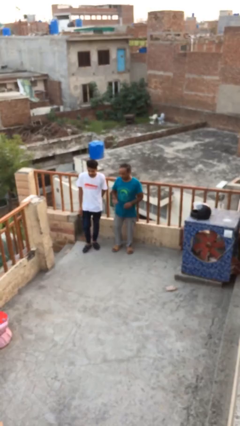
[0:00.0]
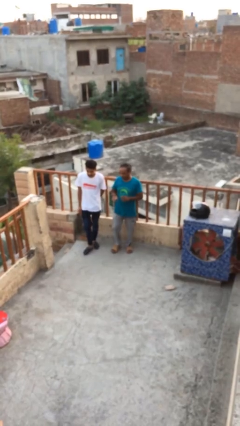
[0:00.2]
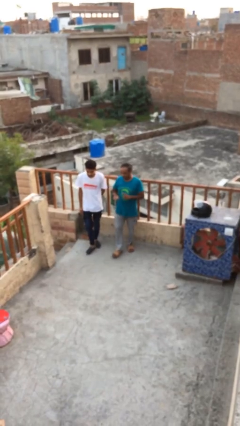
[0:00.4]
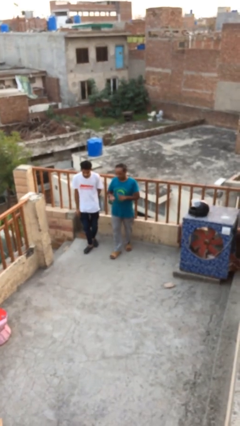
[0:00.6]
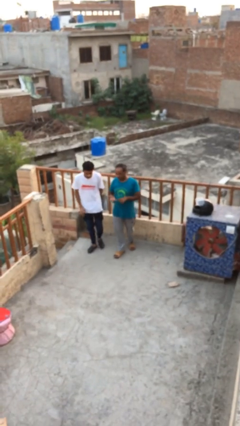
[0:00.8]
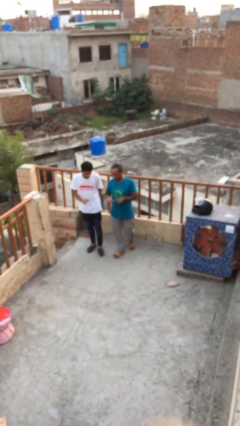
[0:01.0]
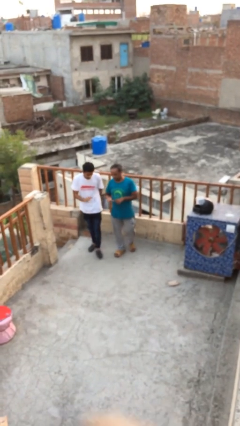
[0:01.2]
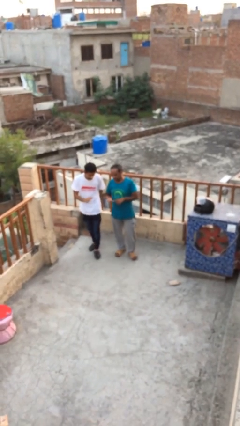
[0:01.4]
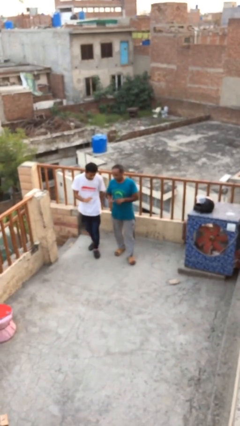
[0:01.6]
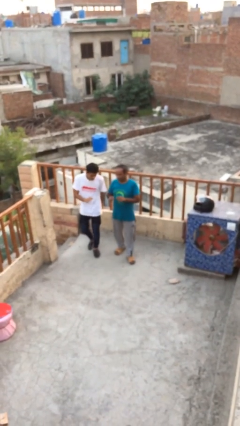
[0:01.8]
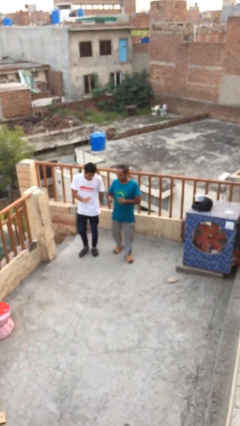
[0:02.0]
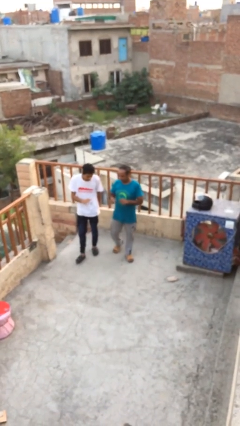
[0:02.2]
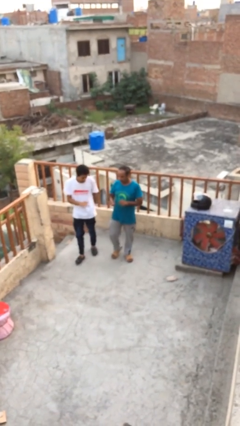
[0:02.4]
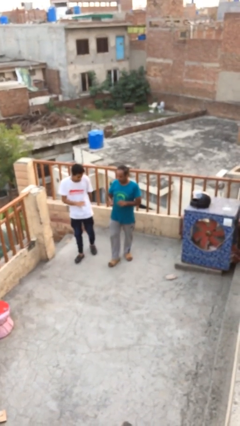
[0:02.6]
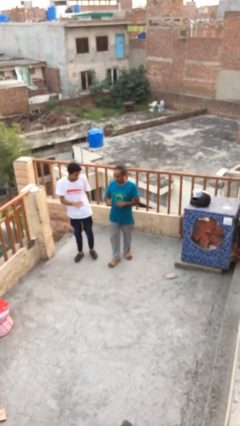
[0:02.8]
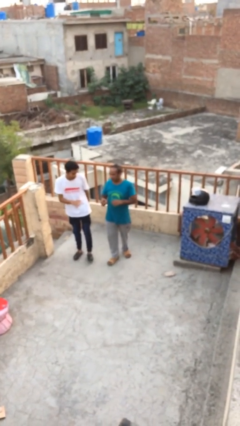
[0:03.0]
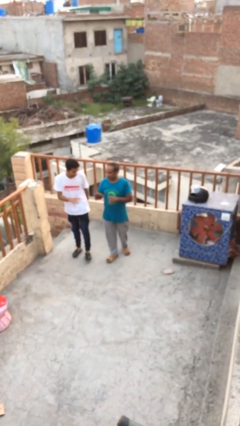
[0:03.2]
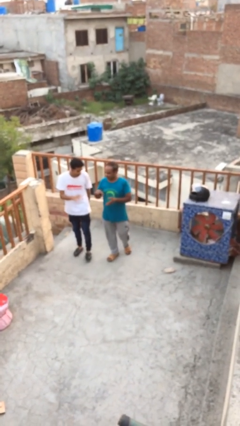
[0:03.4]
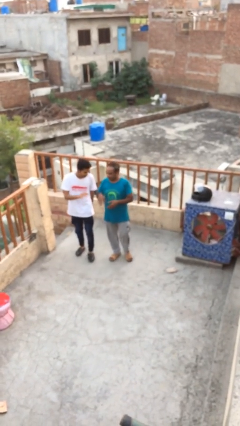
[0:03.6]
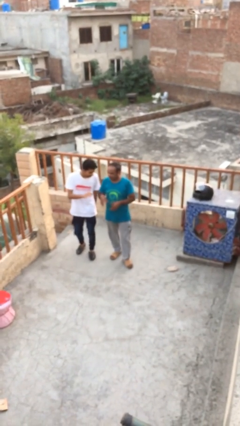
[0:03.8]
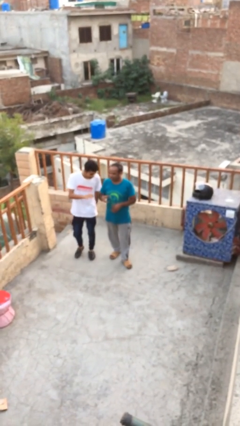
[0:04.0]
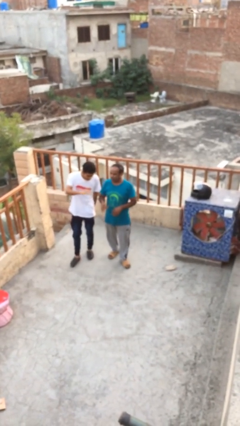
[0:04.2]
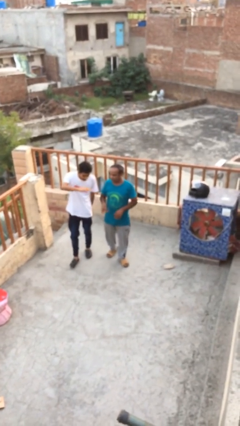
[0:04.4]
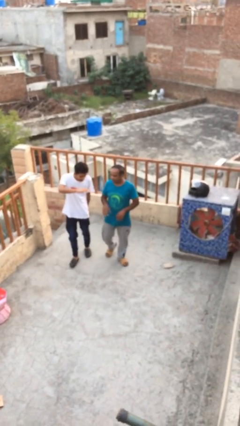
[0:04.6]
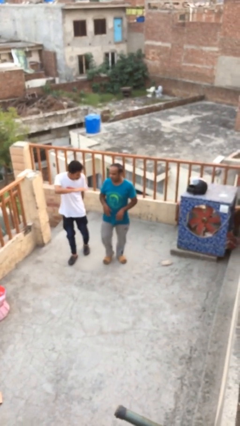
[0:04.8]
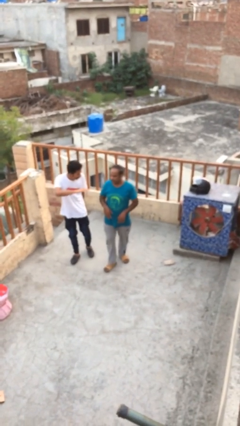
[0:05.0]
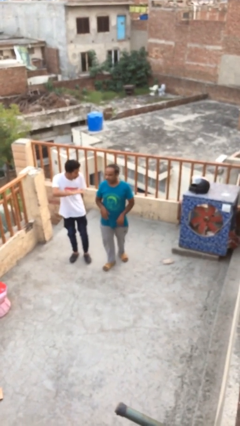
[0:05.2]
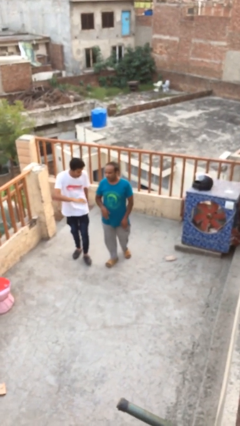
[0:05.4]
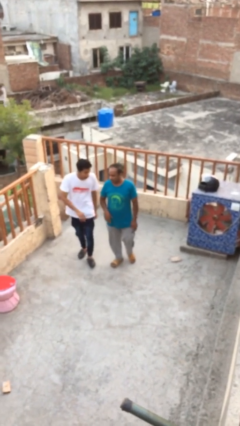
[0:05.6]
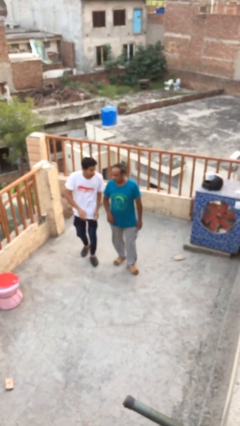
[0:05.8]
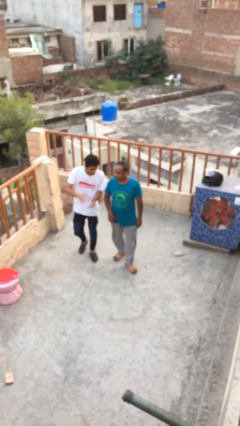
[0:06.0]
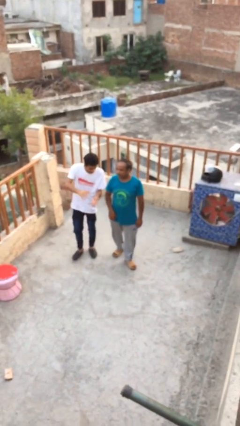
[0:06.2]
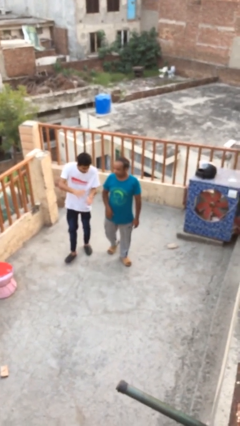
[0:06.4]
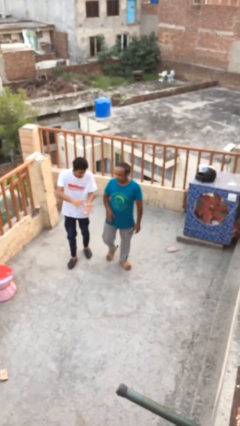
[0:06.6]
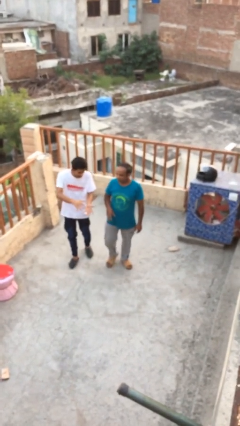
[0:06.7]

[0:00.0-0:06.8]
person talks to person

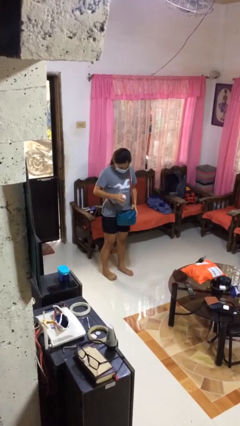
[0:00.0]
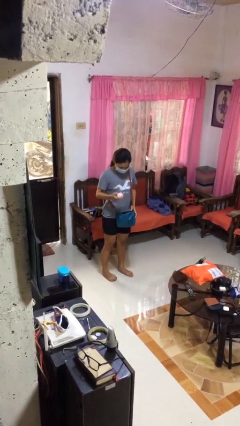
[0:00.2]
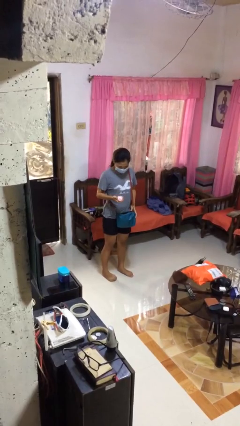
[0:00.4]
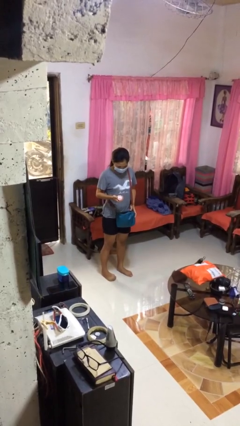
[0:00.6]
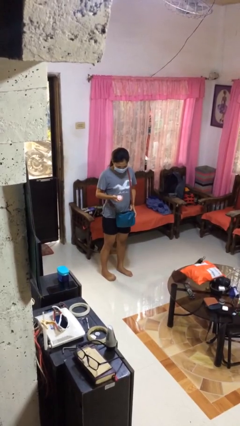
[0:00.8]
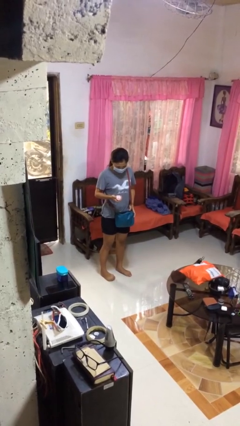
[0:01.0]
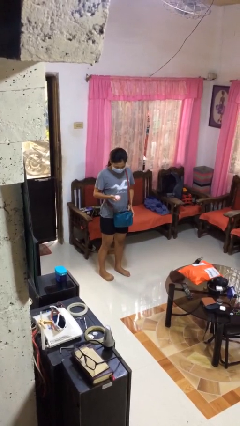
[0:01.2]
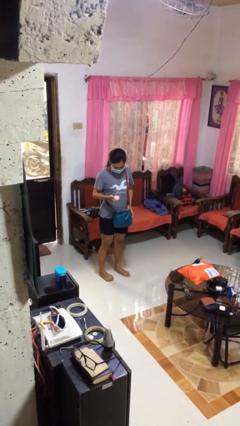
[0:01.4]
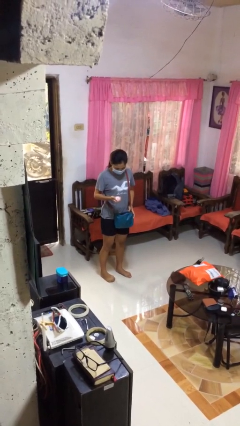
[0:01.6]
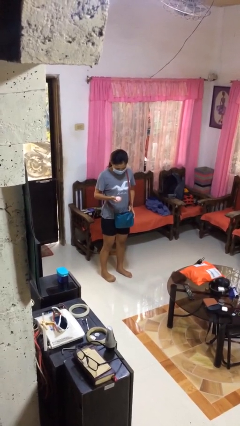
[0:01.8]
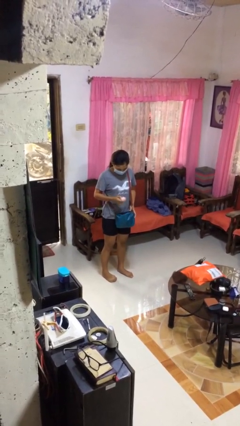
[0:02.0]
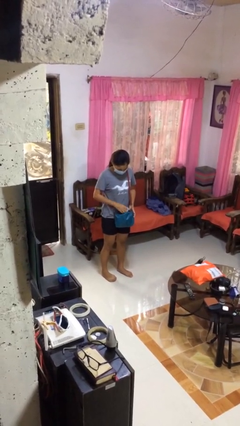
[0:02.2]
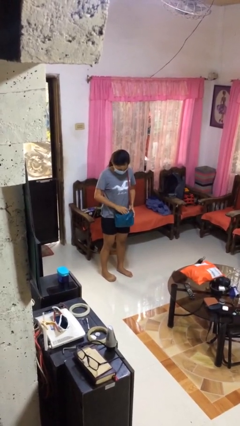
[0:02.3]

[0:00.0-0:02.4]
person takes object from purse

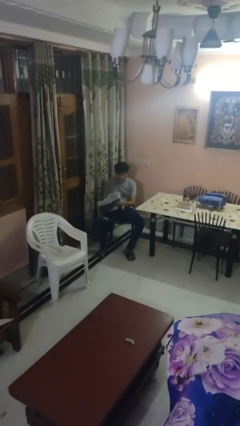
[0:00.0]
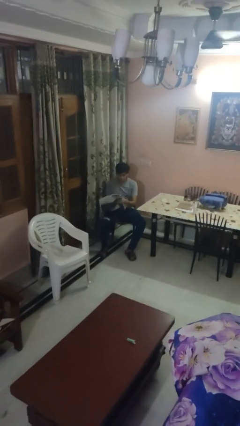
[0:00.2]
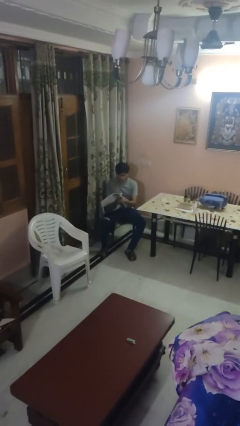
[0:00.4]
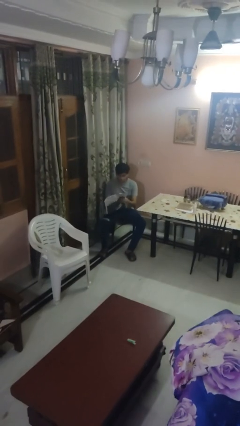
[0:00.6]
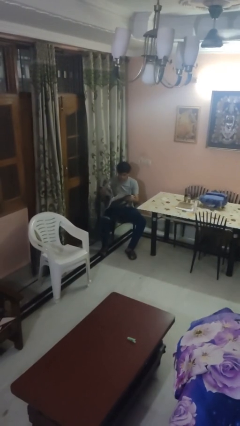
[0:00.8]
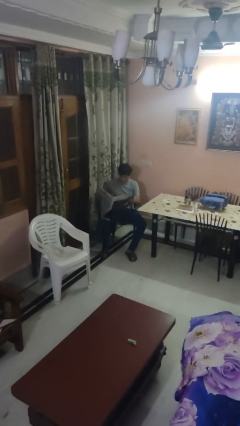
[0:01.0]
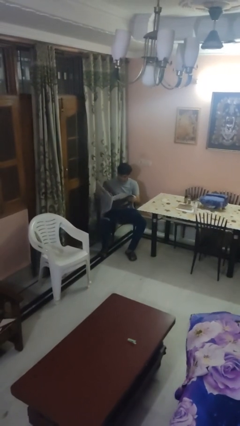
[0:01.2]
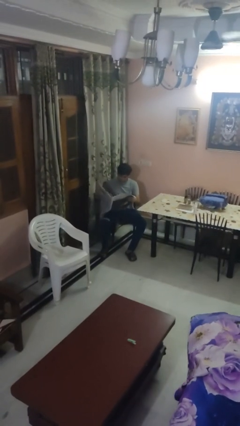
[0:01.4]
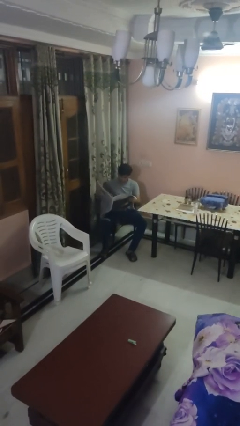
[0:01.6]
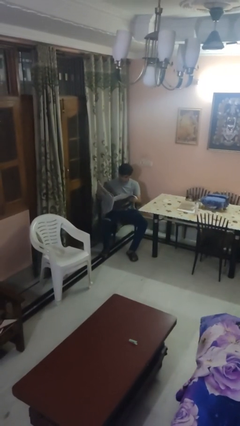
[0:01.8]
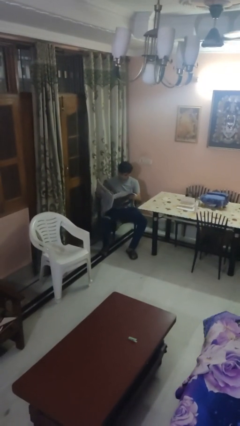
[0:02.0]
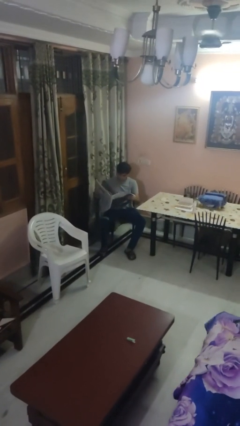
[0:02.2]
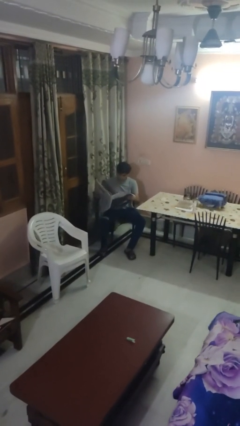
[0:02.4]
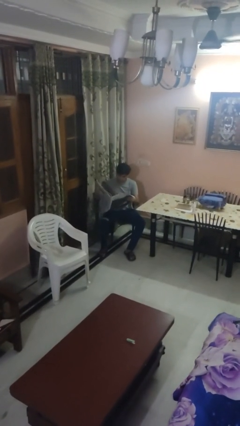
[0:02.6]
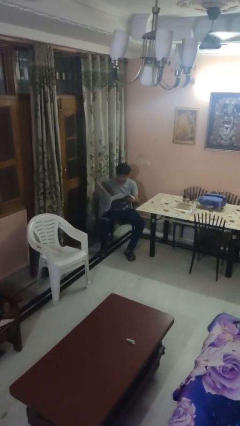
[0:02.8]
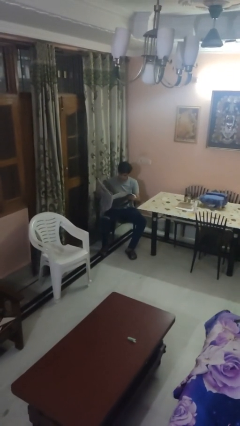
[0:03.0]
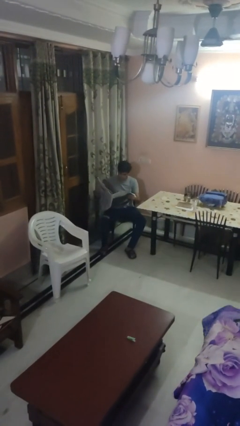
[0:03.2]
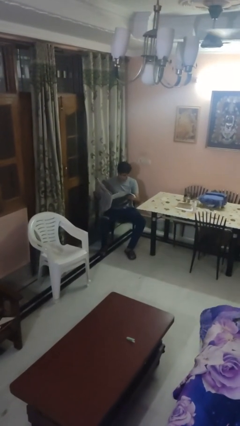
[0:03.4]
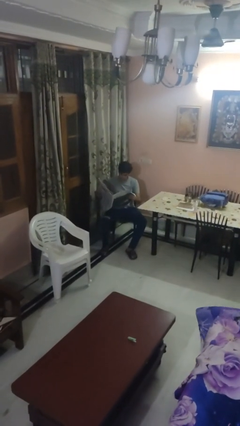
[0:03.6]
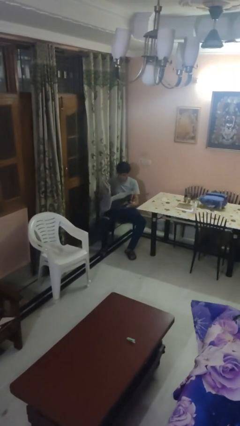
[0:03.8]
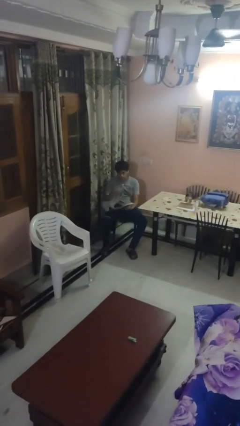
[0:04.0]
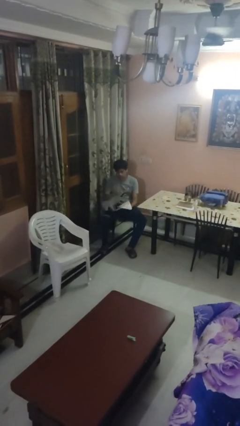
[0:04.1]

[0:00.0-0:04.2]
person reads newspaper

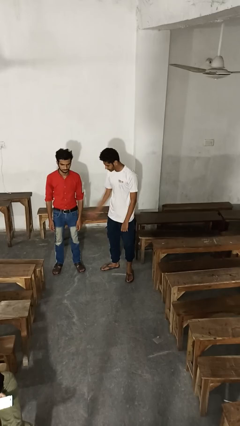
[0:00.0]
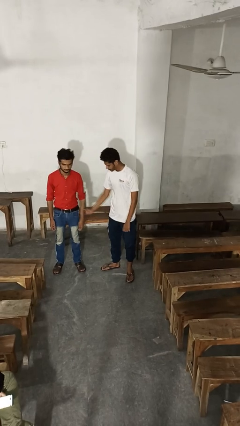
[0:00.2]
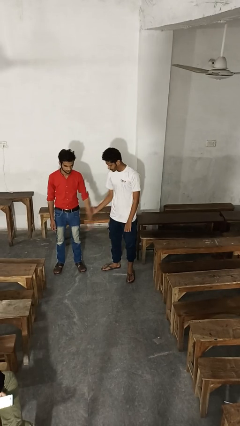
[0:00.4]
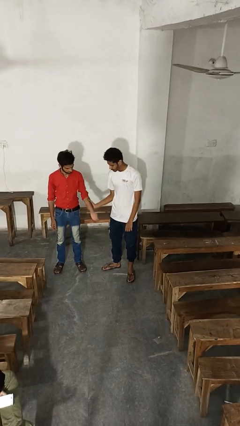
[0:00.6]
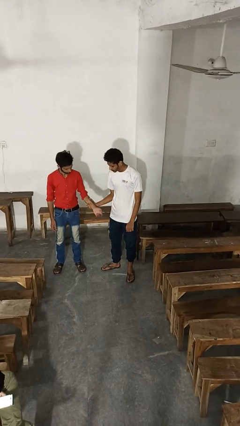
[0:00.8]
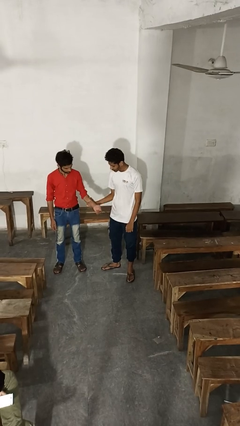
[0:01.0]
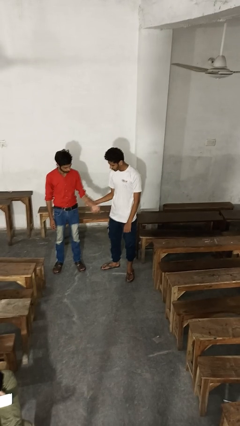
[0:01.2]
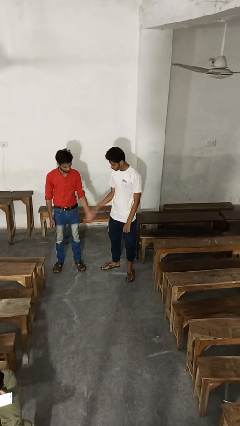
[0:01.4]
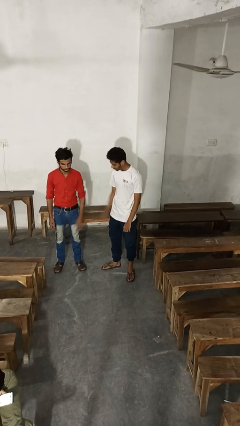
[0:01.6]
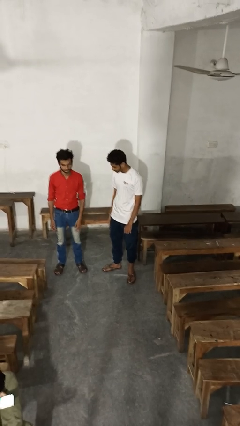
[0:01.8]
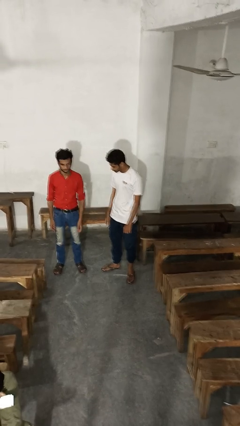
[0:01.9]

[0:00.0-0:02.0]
person grabs person by forearm

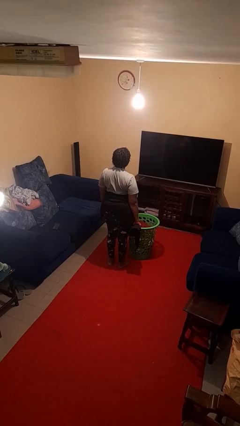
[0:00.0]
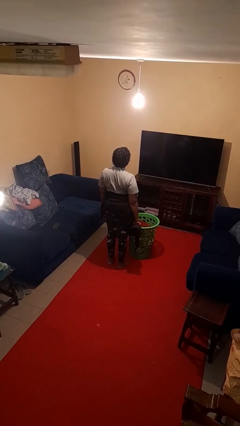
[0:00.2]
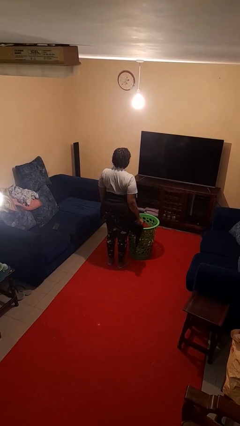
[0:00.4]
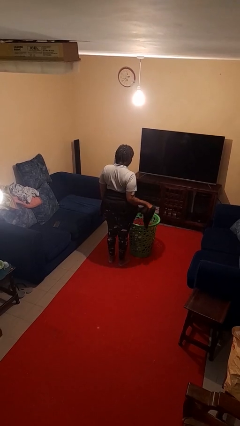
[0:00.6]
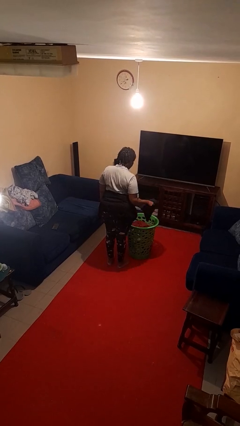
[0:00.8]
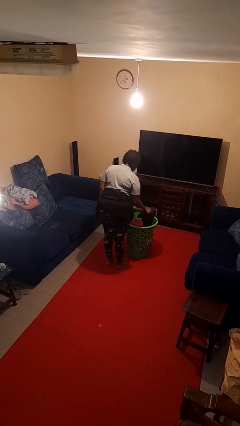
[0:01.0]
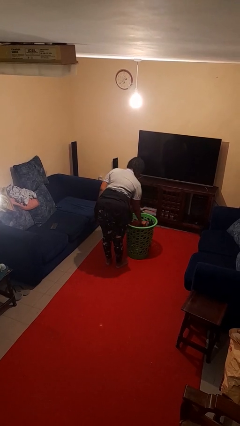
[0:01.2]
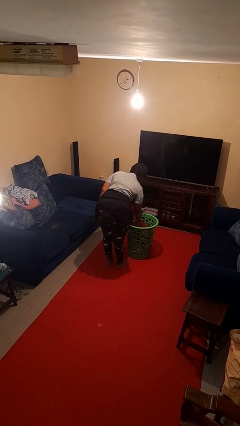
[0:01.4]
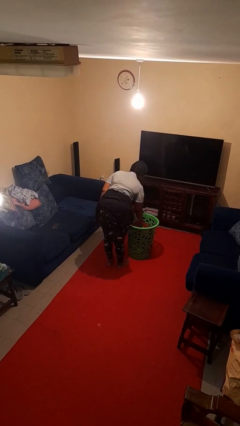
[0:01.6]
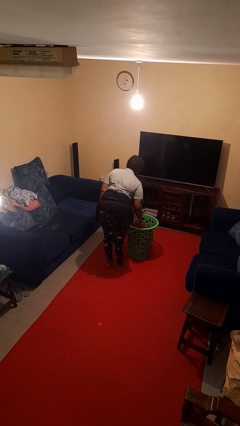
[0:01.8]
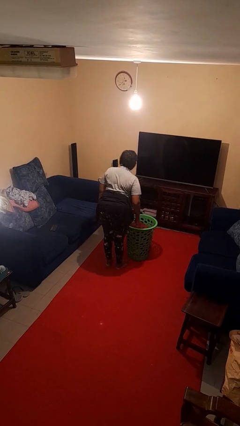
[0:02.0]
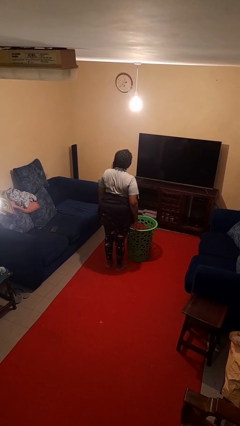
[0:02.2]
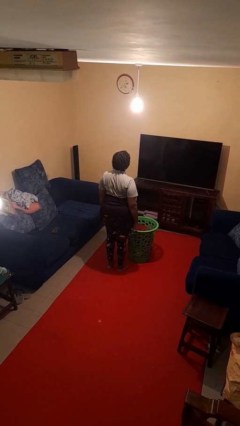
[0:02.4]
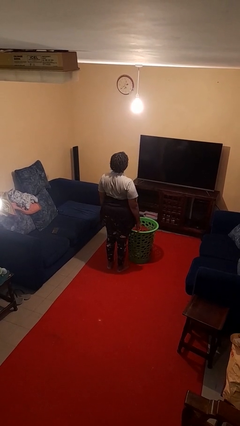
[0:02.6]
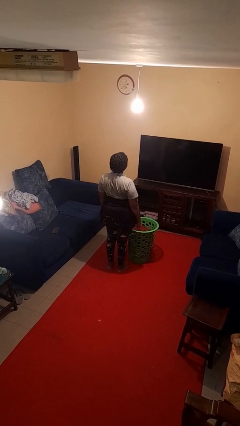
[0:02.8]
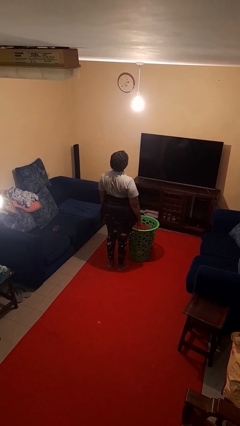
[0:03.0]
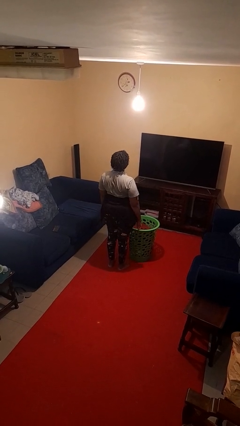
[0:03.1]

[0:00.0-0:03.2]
person puts object into basket
